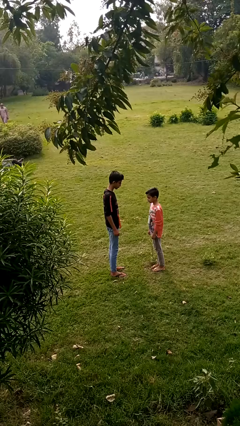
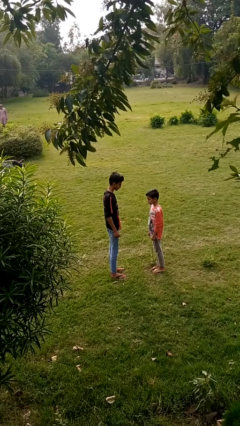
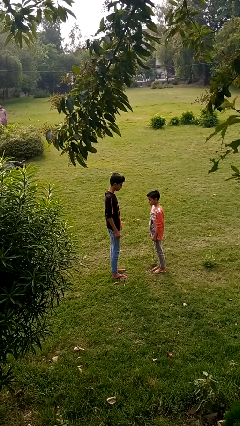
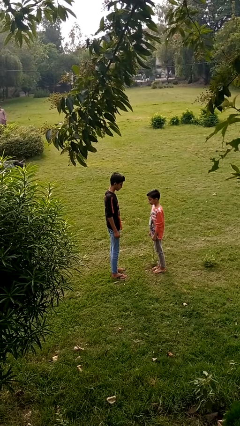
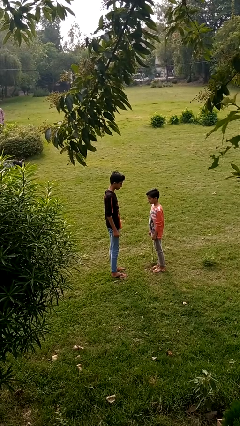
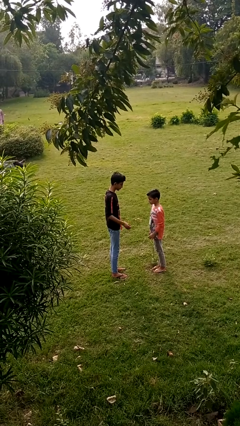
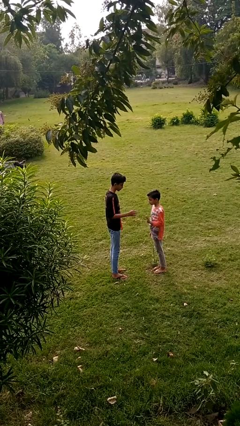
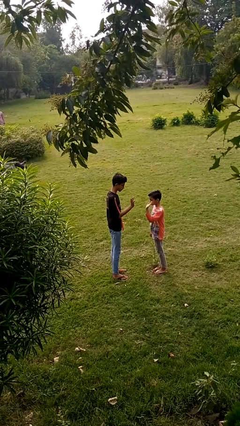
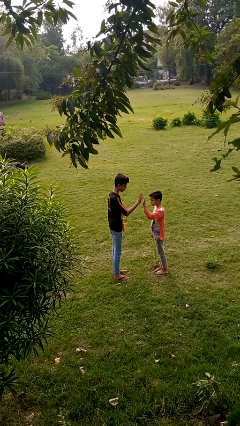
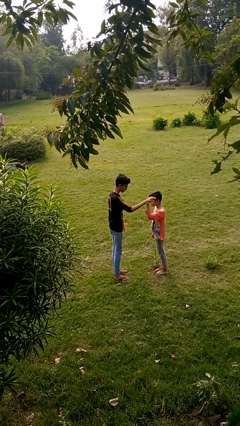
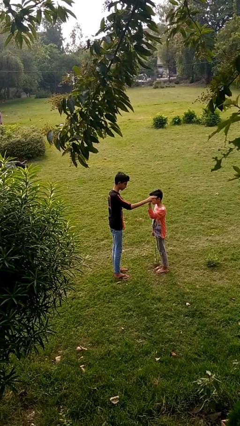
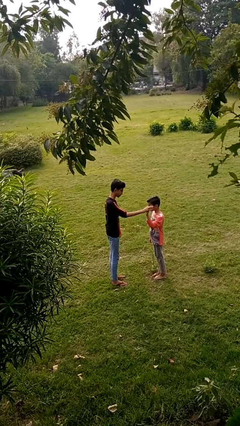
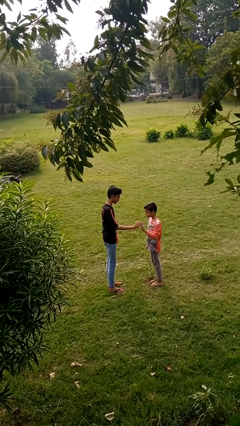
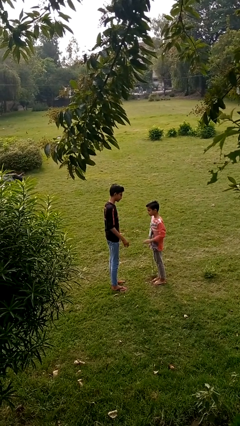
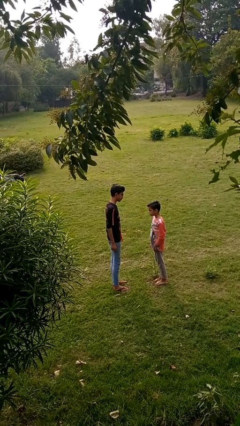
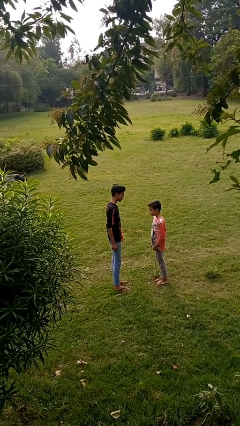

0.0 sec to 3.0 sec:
person highfives hand

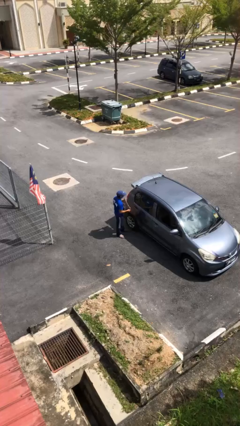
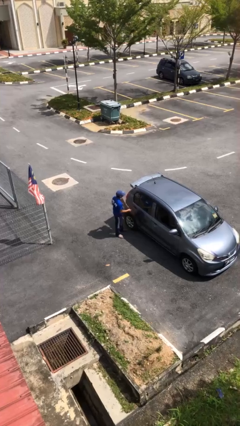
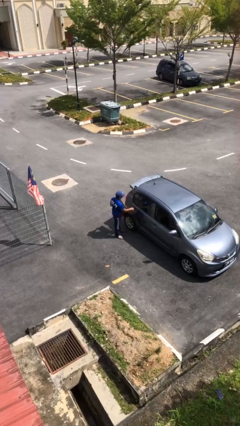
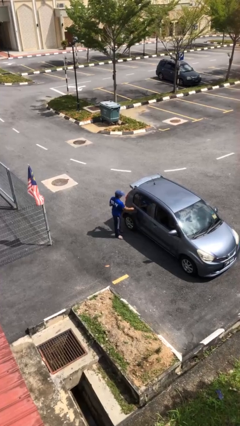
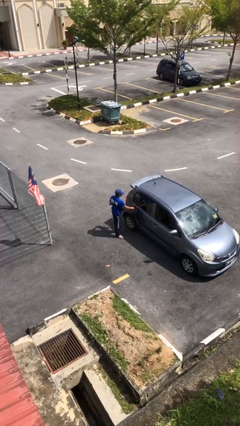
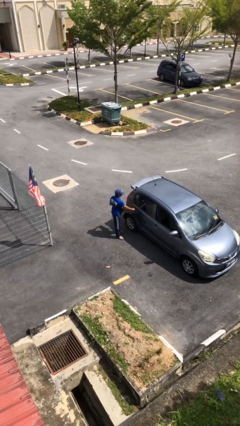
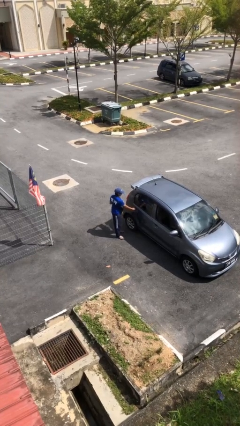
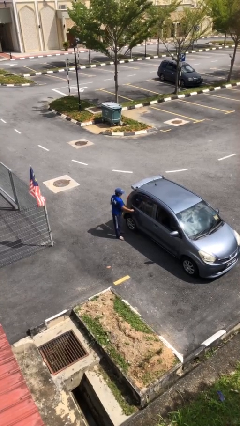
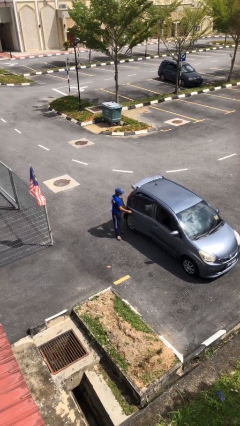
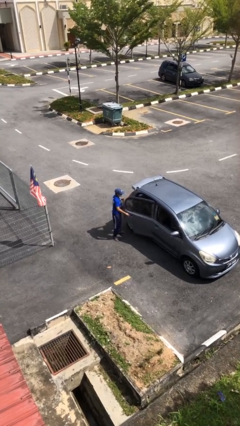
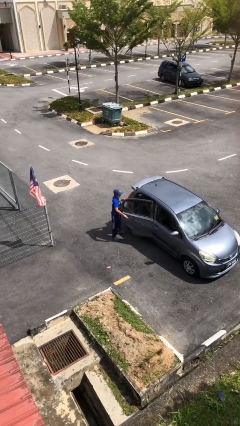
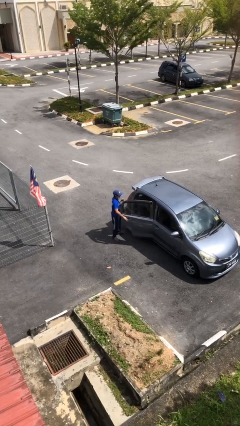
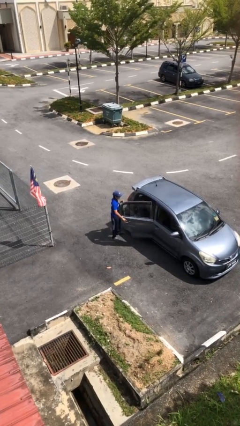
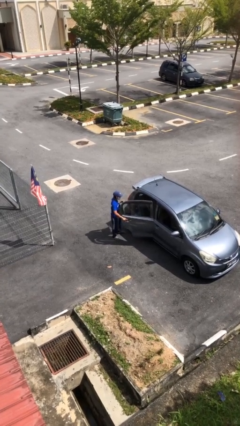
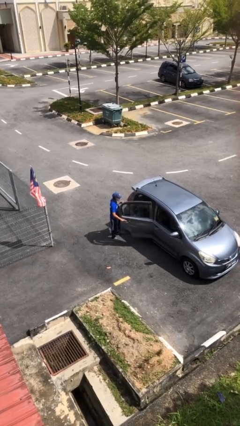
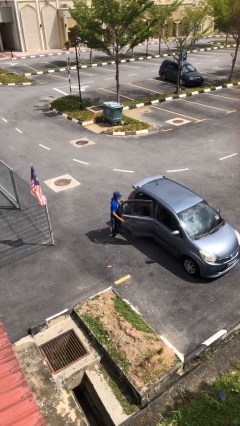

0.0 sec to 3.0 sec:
person opens car door

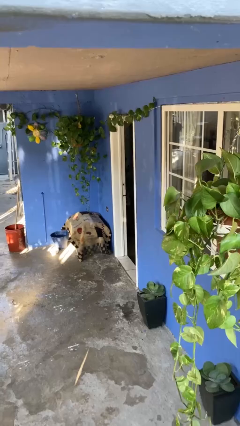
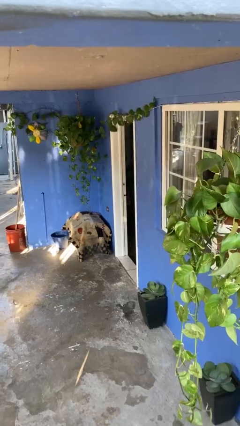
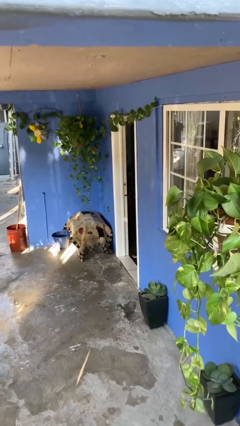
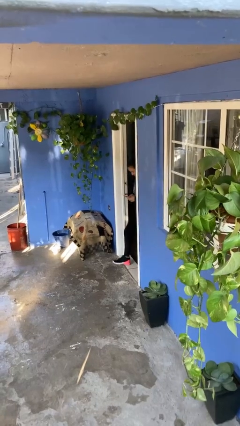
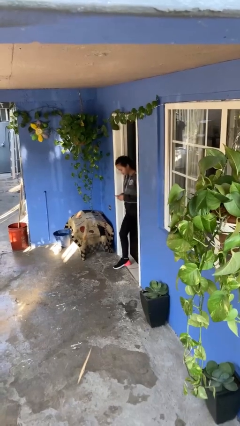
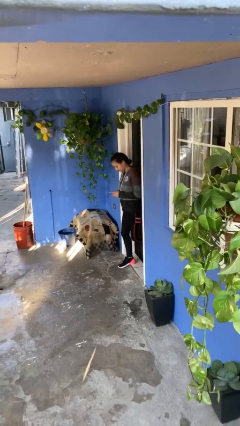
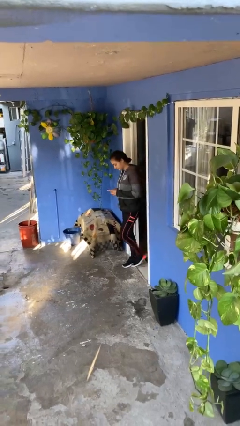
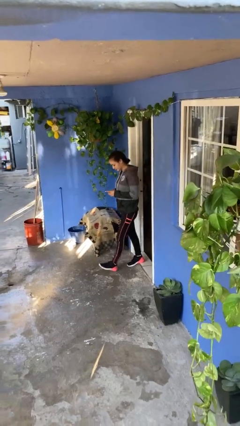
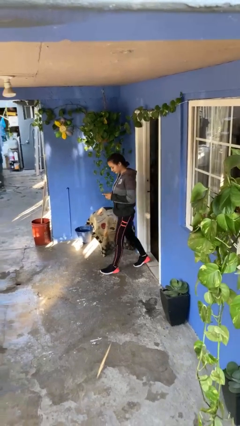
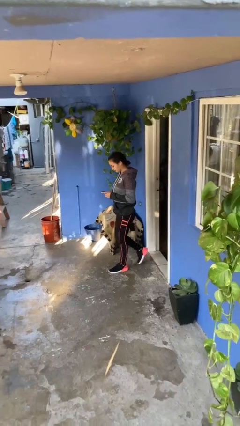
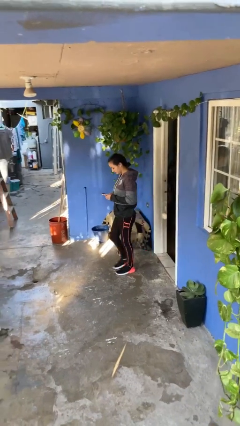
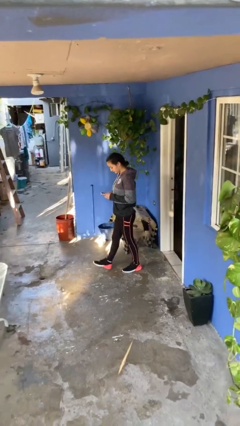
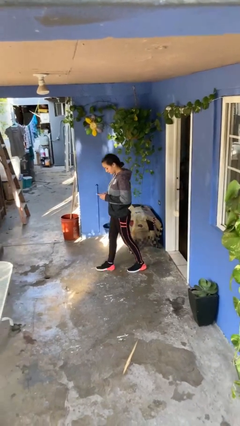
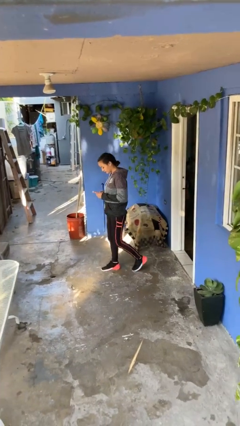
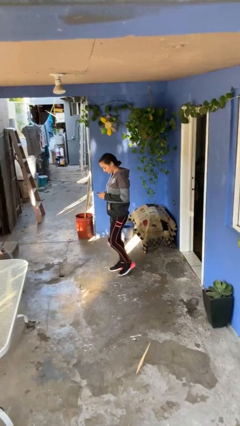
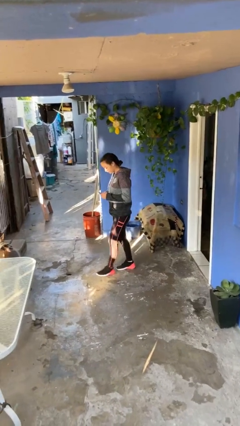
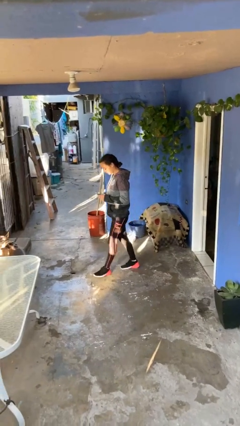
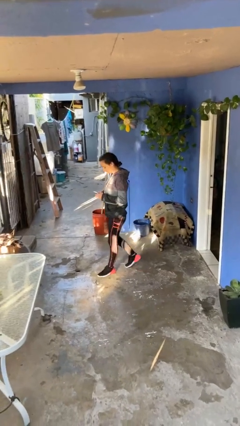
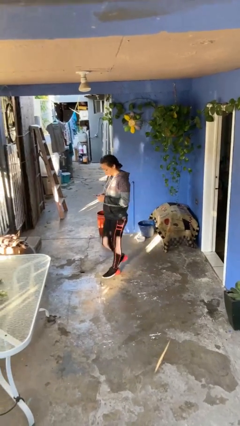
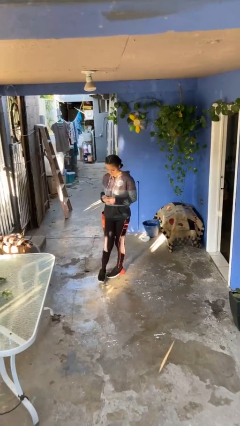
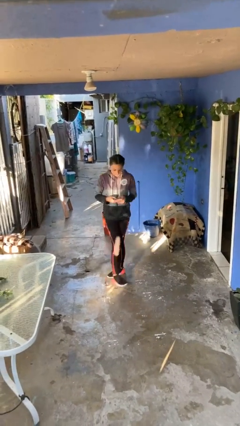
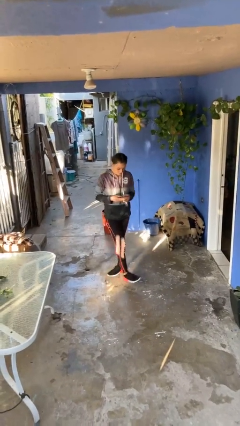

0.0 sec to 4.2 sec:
person enters scene through structure

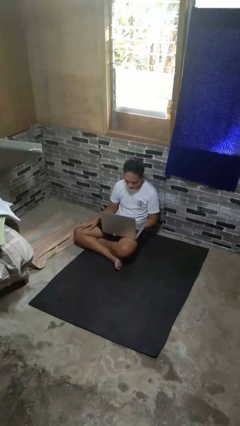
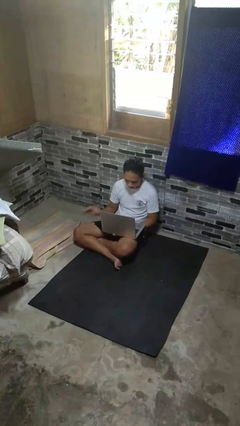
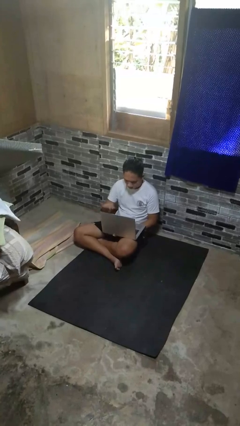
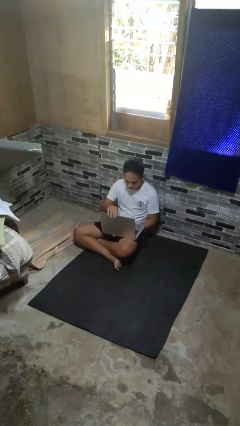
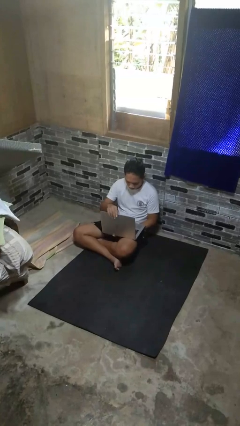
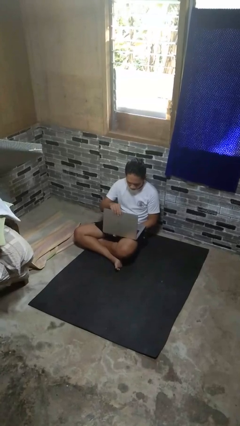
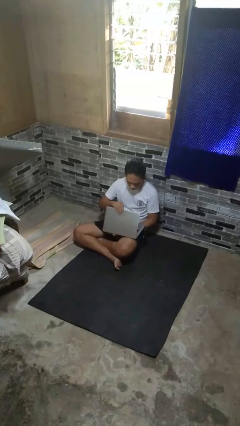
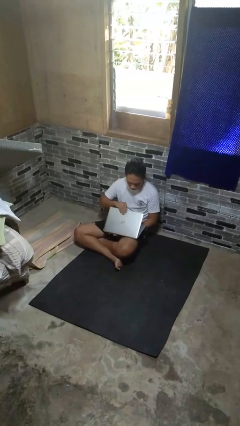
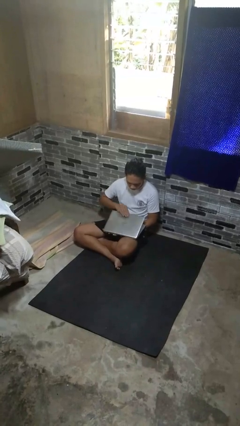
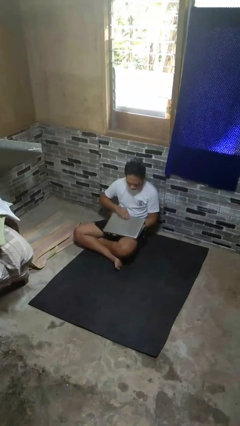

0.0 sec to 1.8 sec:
person closes laptop

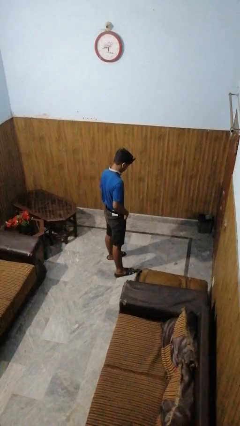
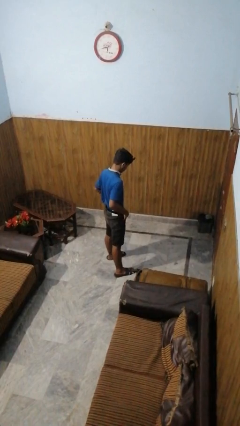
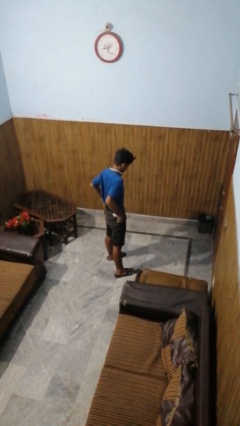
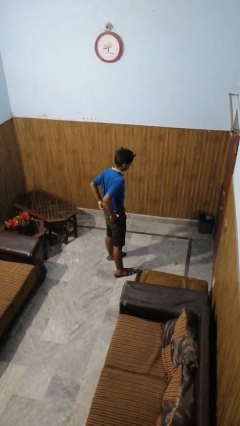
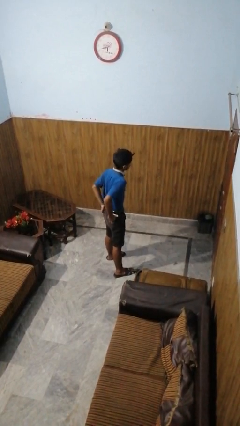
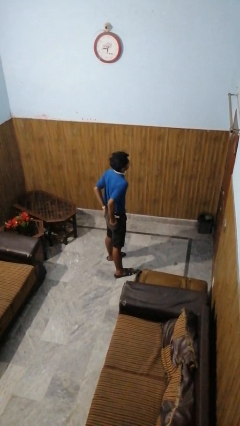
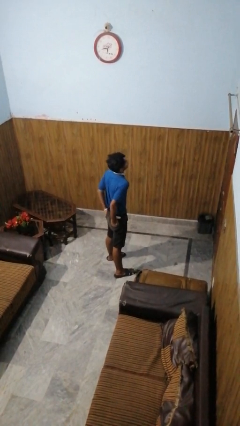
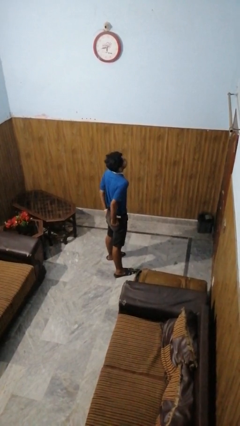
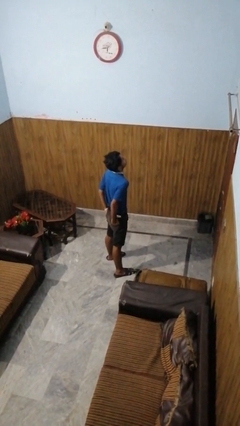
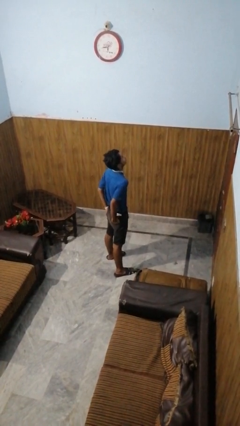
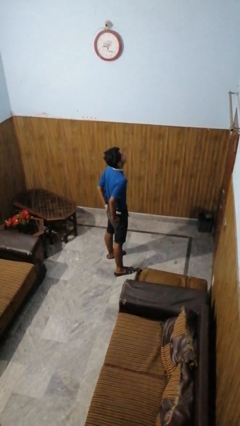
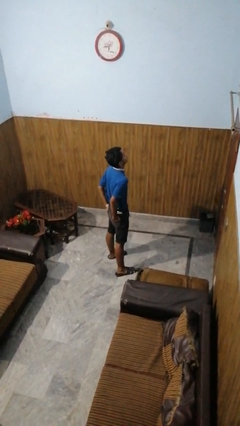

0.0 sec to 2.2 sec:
person puts hands in back pockets

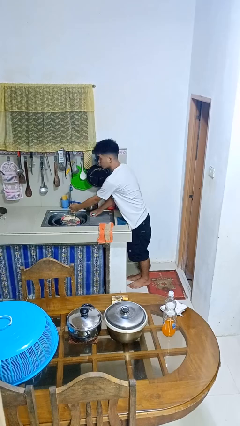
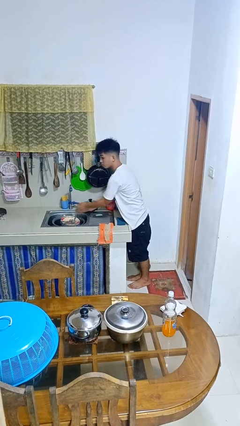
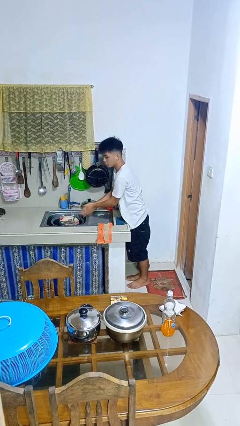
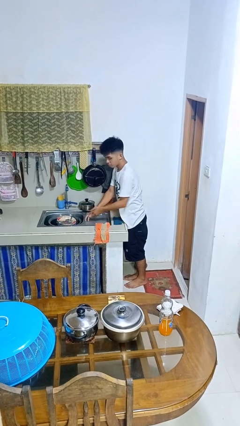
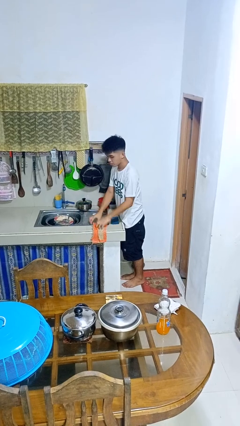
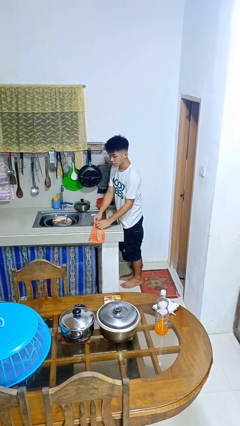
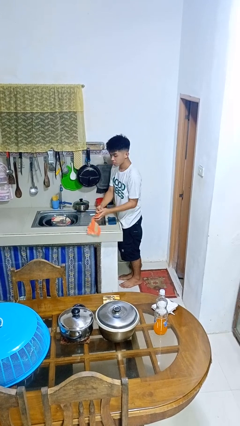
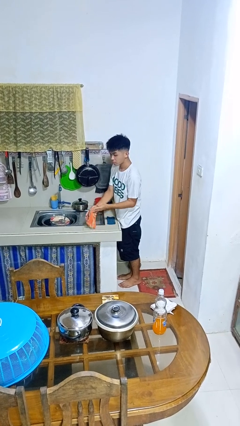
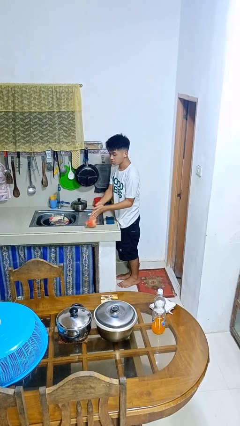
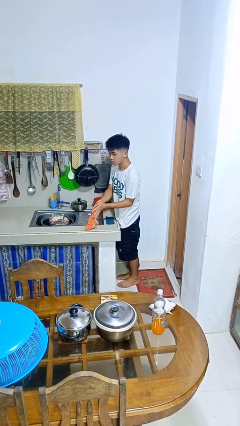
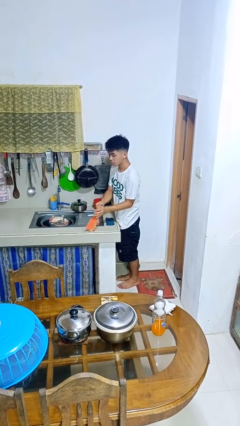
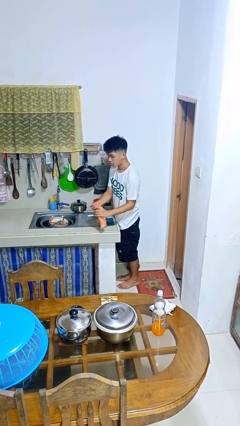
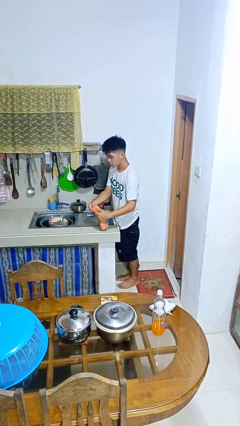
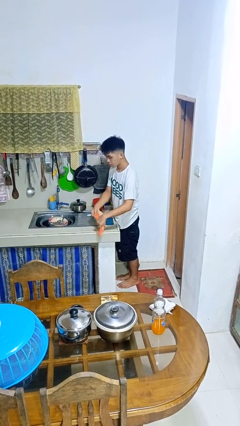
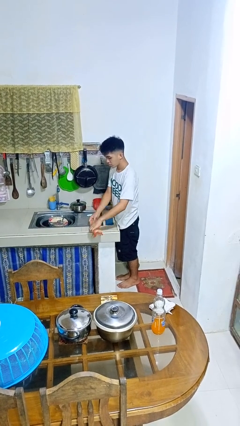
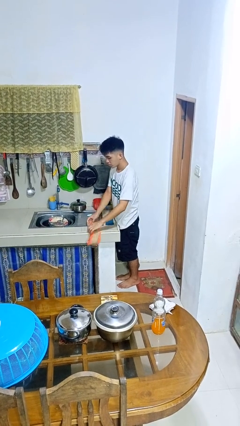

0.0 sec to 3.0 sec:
person dries hands with towel

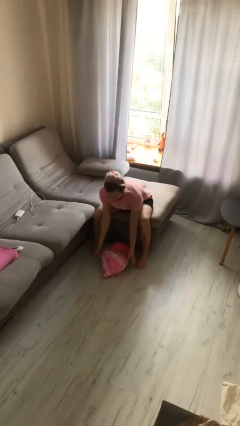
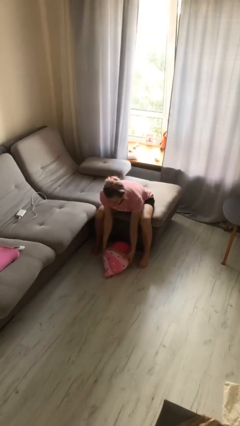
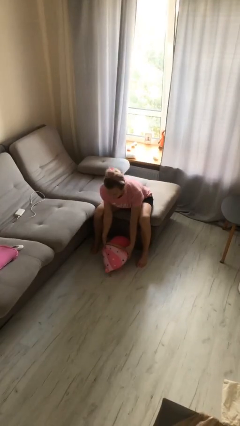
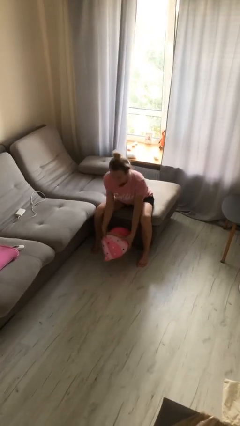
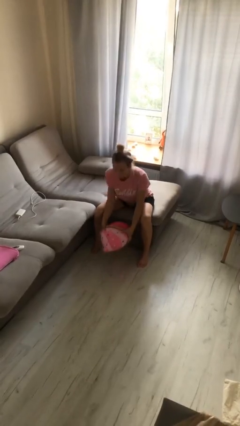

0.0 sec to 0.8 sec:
person picks up object from floor
